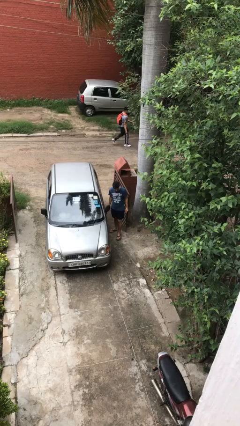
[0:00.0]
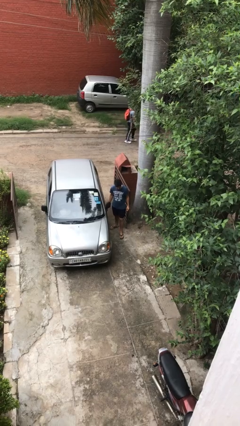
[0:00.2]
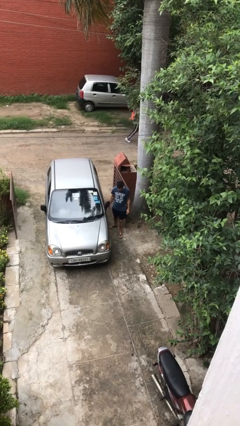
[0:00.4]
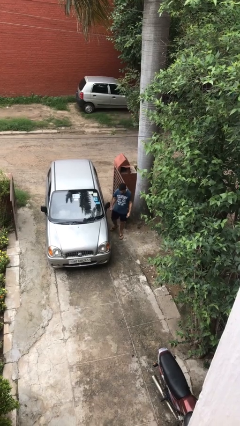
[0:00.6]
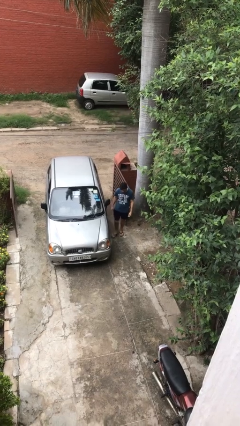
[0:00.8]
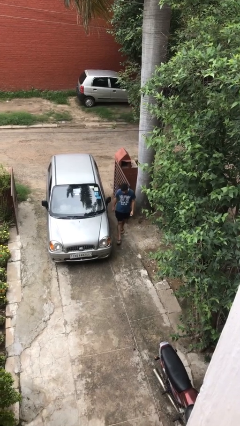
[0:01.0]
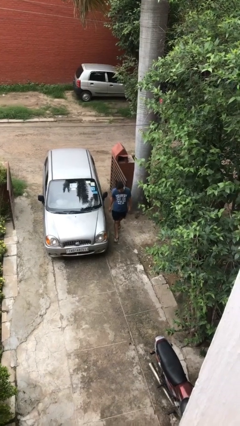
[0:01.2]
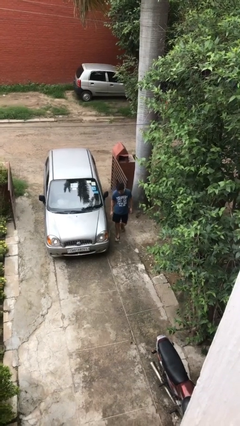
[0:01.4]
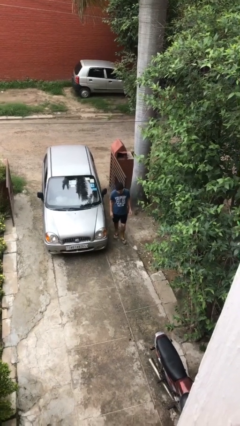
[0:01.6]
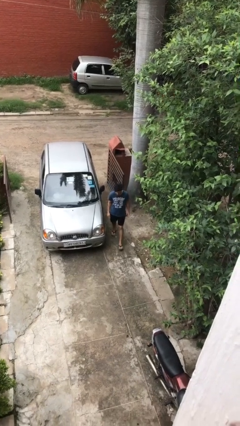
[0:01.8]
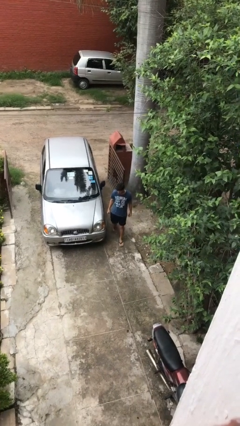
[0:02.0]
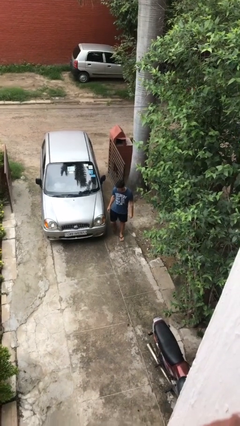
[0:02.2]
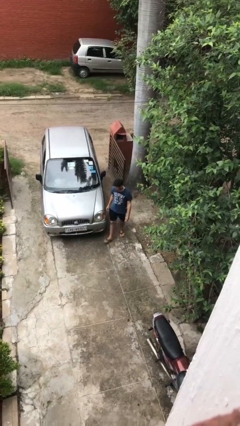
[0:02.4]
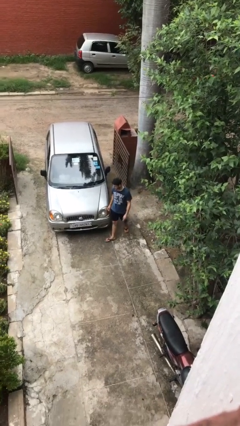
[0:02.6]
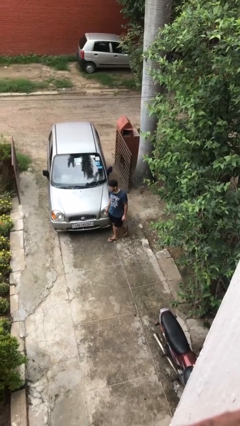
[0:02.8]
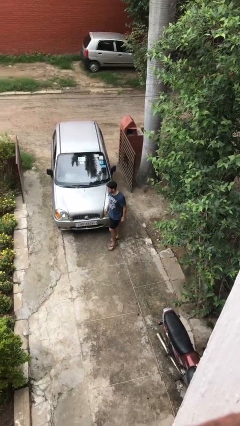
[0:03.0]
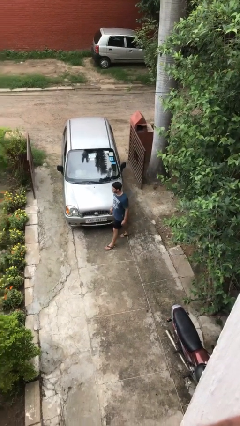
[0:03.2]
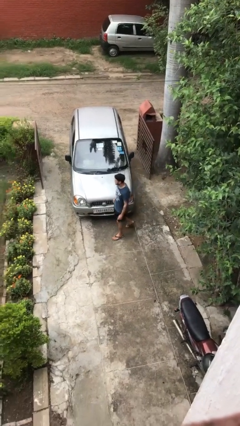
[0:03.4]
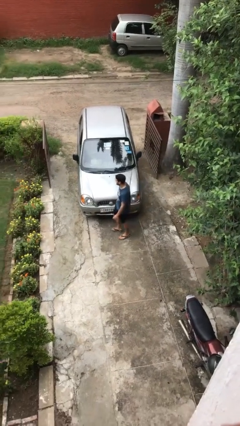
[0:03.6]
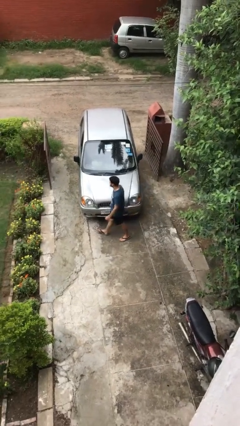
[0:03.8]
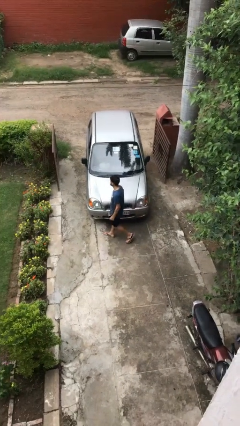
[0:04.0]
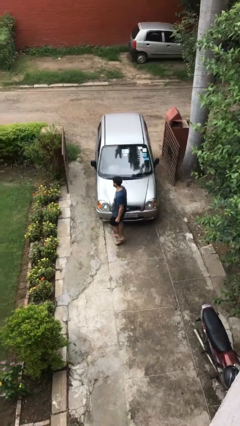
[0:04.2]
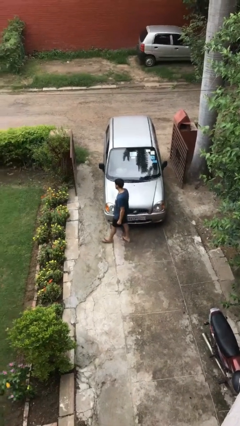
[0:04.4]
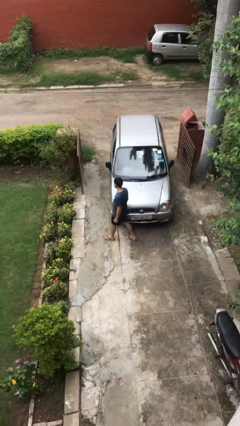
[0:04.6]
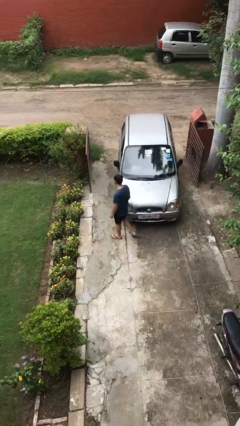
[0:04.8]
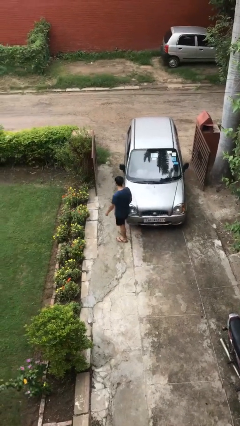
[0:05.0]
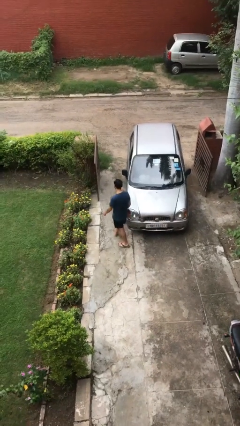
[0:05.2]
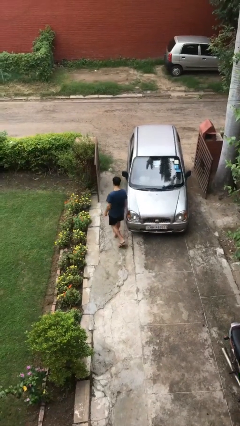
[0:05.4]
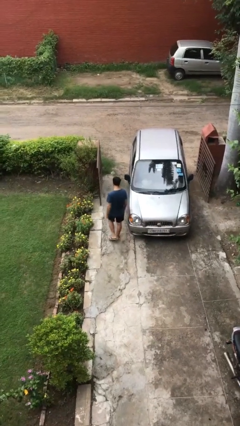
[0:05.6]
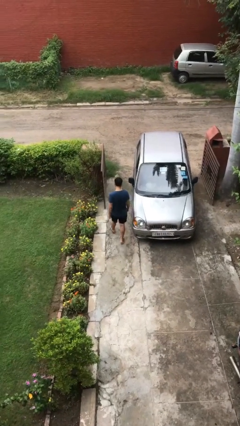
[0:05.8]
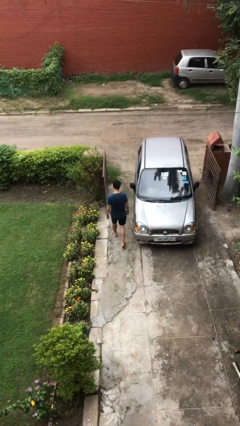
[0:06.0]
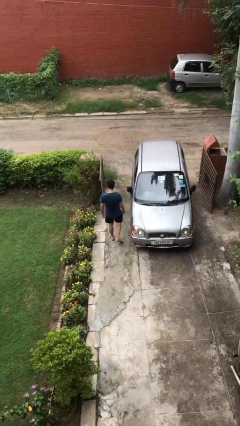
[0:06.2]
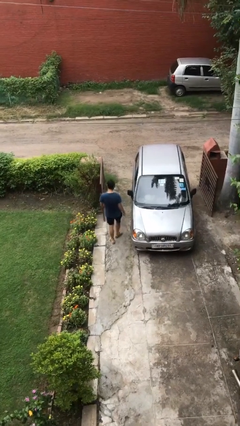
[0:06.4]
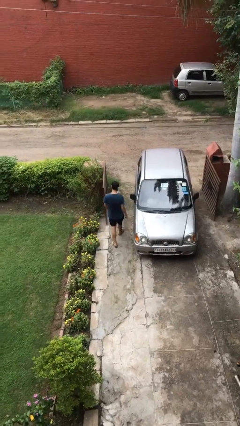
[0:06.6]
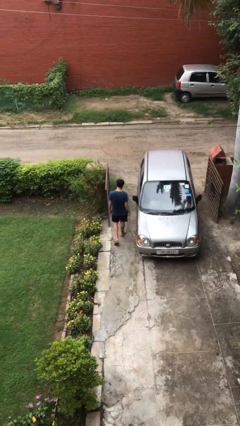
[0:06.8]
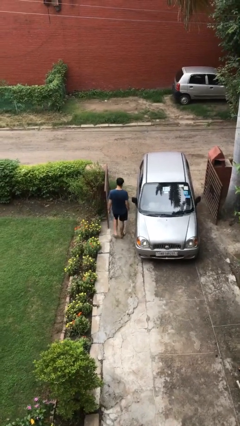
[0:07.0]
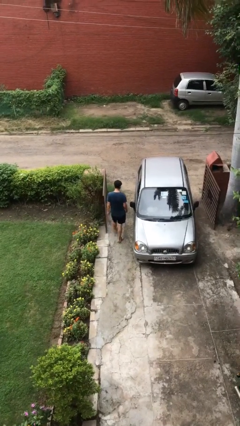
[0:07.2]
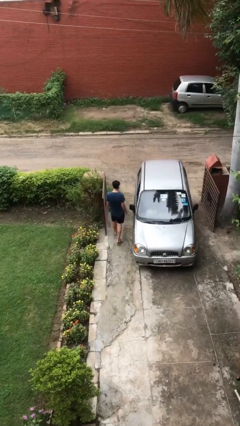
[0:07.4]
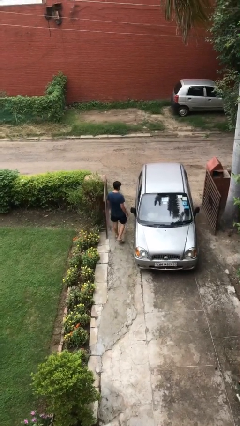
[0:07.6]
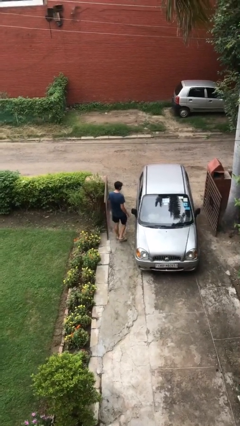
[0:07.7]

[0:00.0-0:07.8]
person walks around car

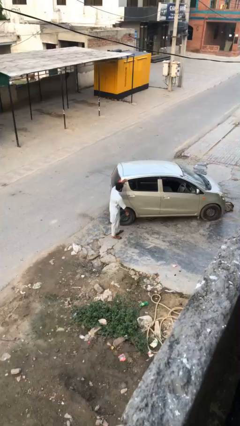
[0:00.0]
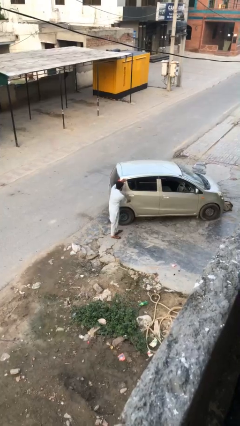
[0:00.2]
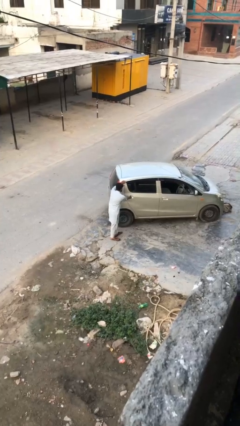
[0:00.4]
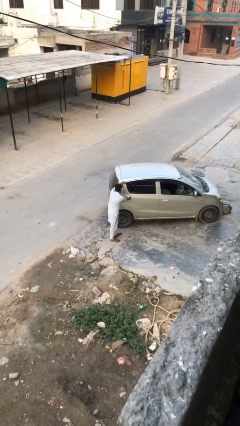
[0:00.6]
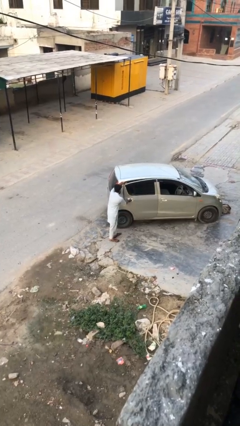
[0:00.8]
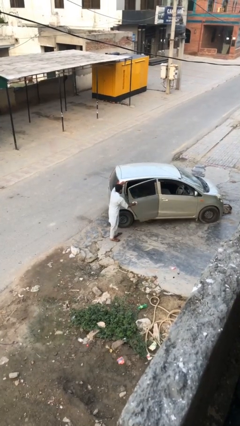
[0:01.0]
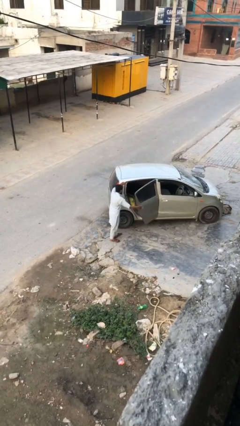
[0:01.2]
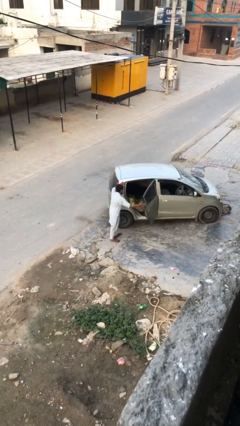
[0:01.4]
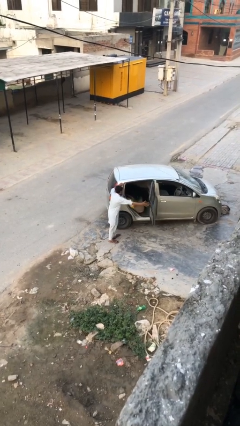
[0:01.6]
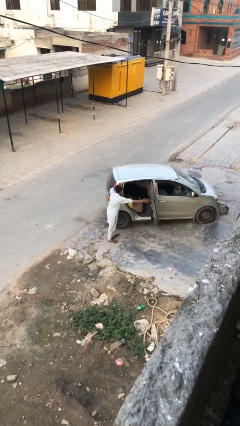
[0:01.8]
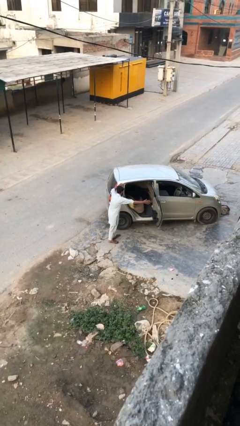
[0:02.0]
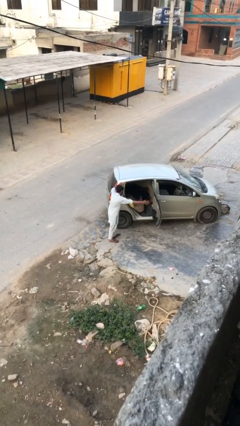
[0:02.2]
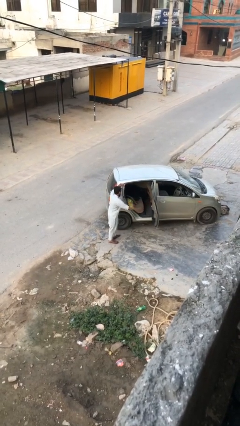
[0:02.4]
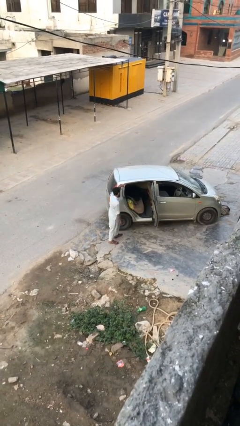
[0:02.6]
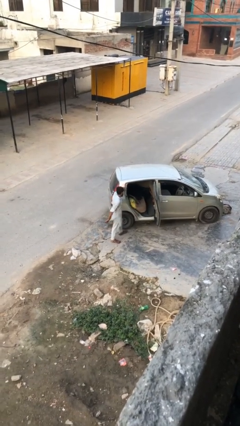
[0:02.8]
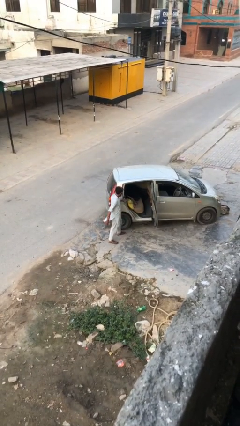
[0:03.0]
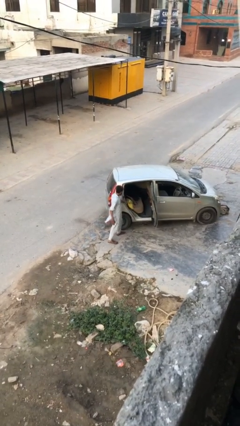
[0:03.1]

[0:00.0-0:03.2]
person opens car door

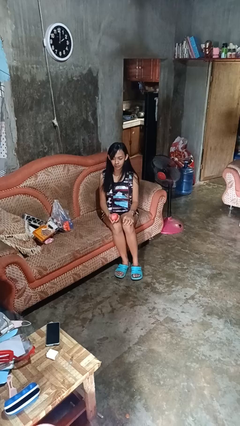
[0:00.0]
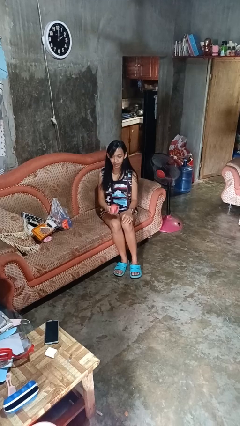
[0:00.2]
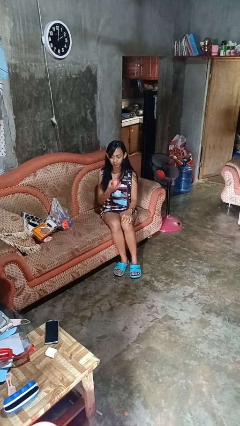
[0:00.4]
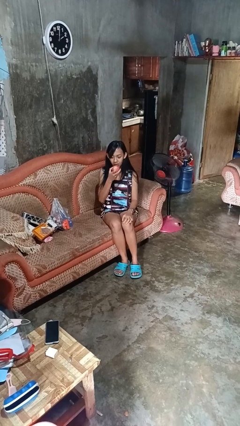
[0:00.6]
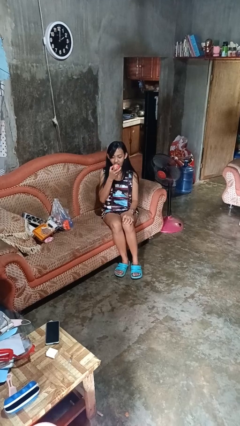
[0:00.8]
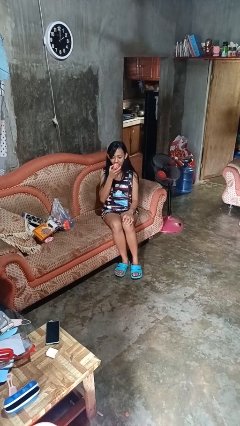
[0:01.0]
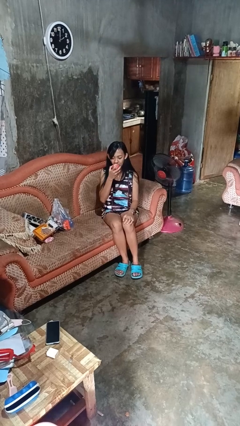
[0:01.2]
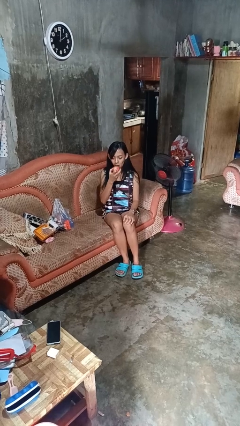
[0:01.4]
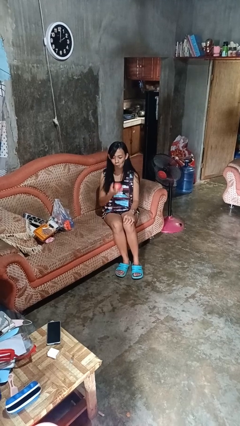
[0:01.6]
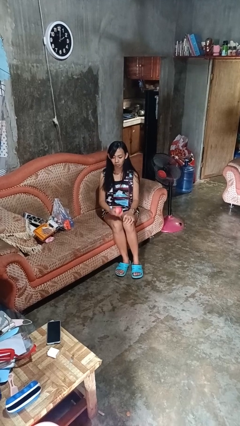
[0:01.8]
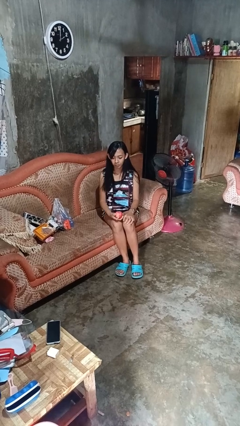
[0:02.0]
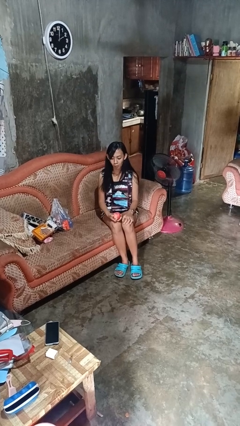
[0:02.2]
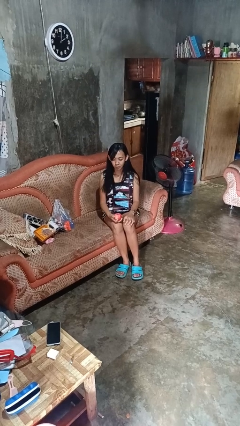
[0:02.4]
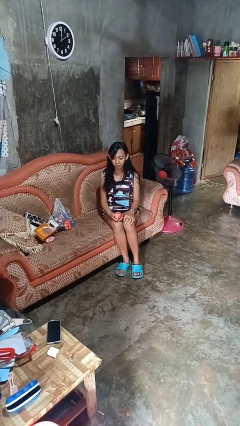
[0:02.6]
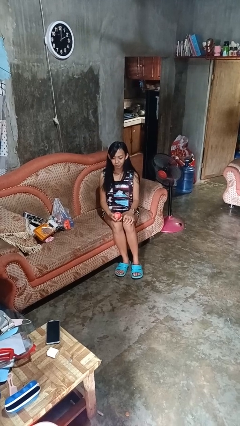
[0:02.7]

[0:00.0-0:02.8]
person eats apple

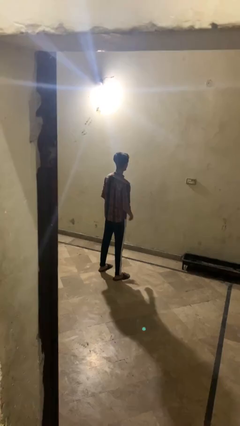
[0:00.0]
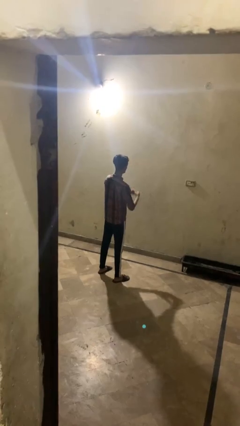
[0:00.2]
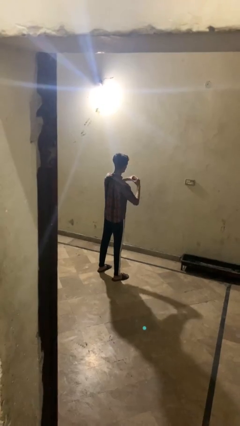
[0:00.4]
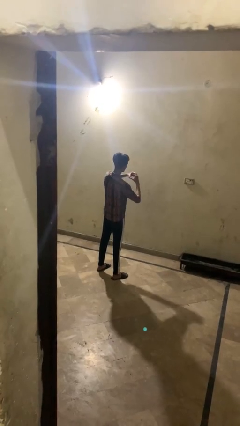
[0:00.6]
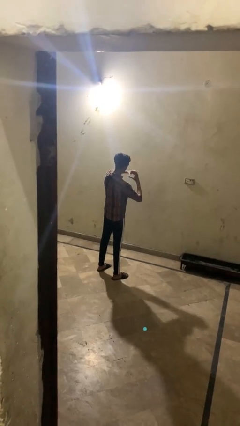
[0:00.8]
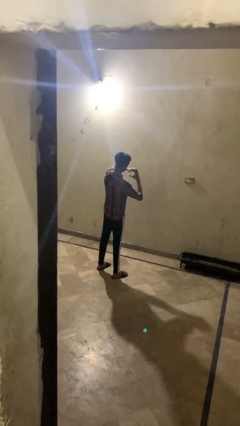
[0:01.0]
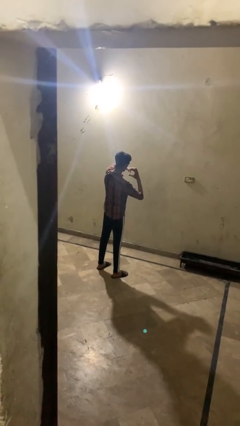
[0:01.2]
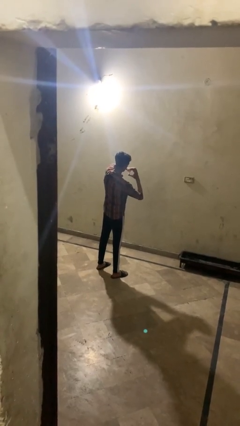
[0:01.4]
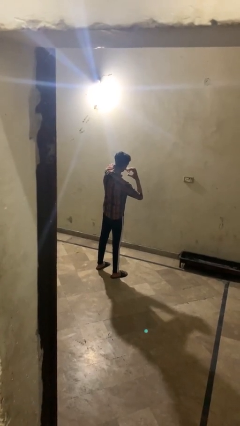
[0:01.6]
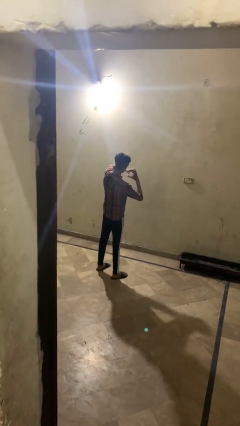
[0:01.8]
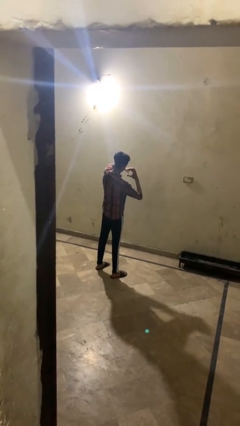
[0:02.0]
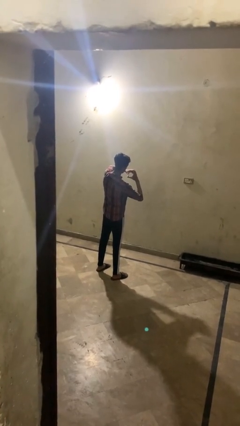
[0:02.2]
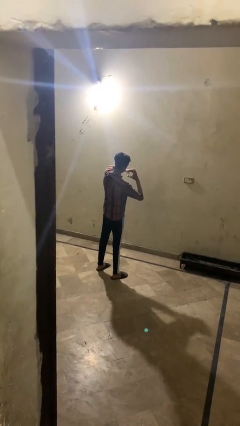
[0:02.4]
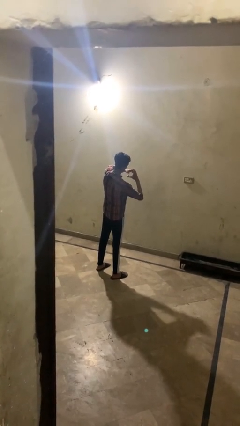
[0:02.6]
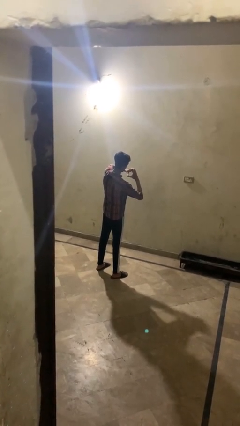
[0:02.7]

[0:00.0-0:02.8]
person gestures heart

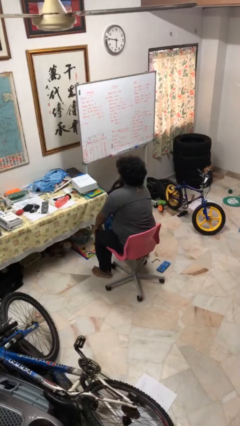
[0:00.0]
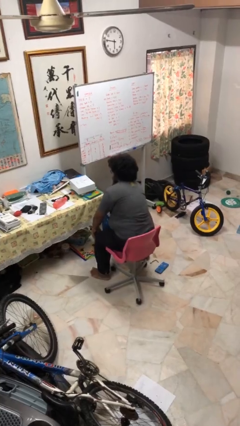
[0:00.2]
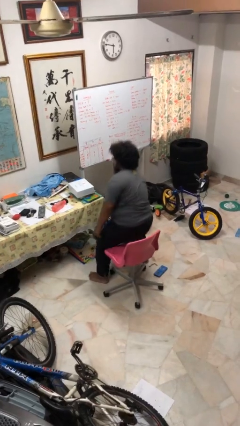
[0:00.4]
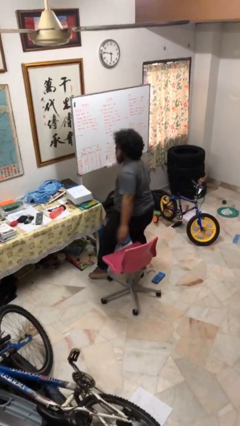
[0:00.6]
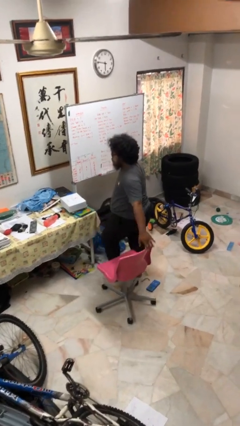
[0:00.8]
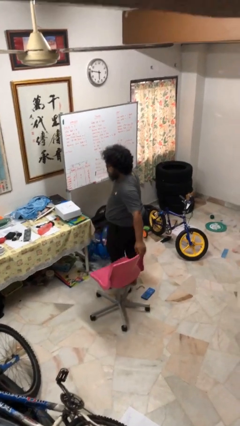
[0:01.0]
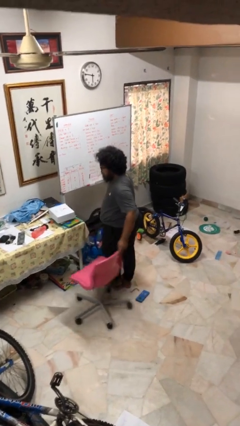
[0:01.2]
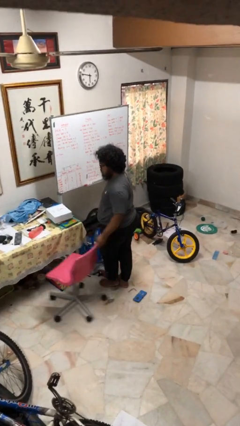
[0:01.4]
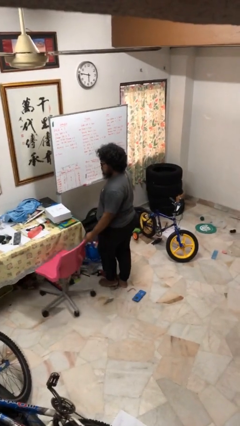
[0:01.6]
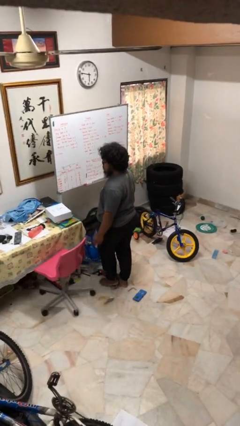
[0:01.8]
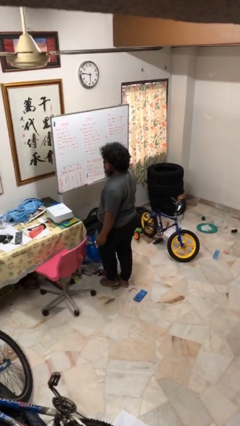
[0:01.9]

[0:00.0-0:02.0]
person stands up
